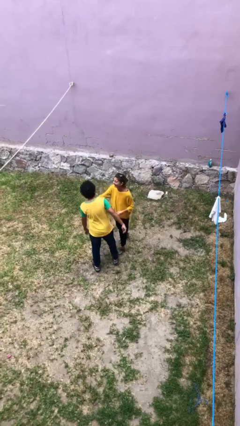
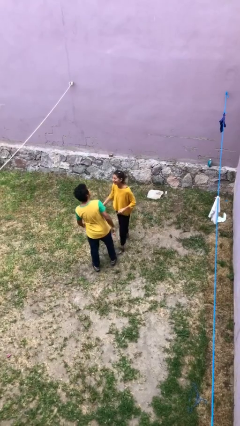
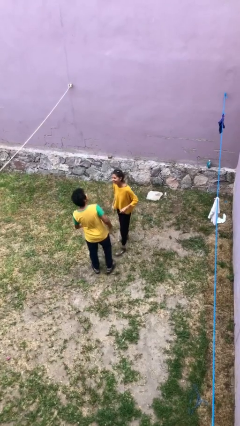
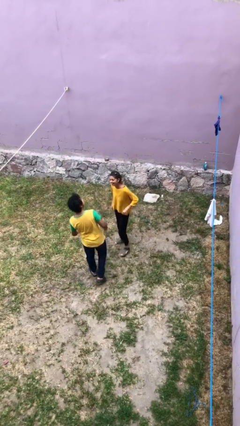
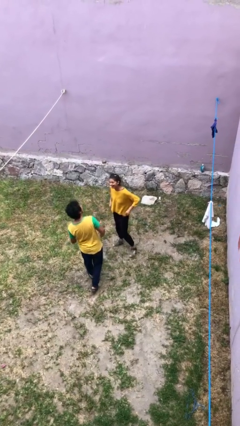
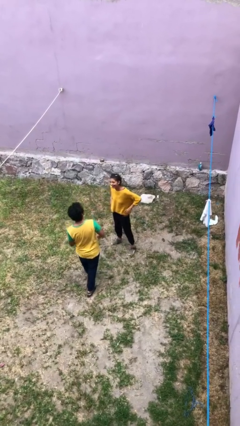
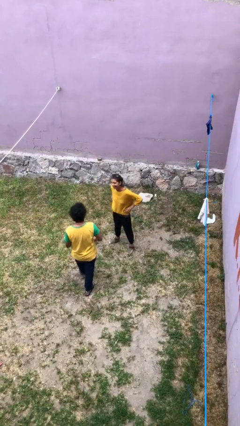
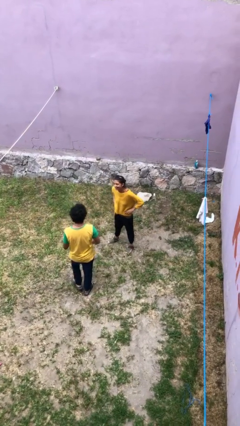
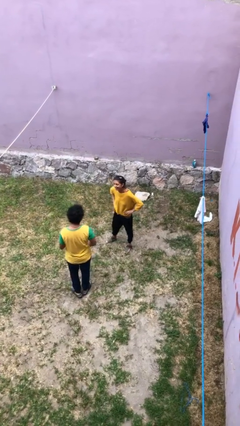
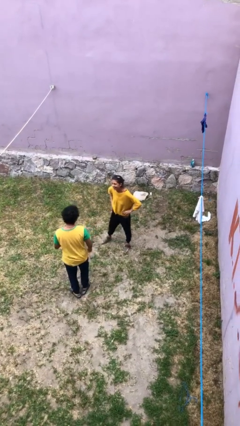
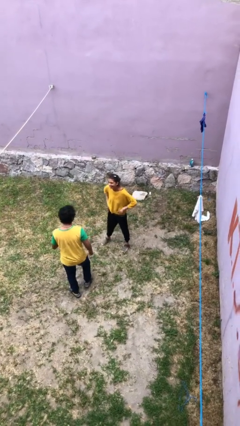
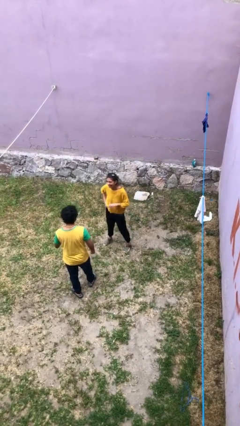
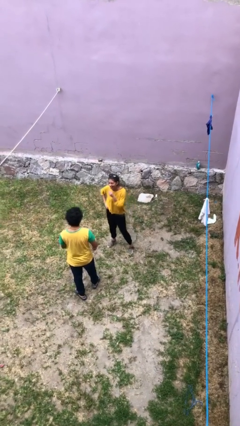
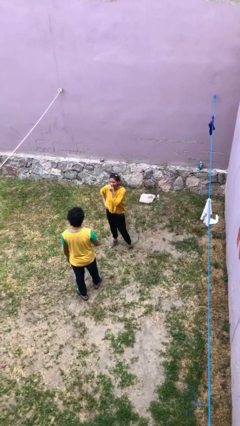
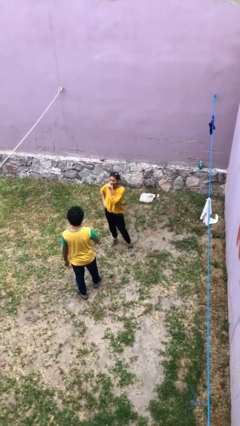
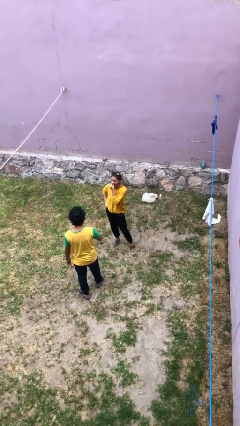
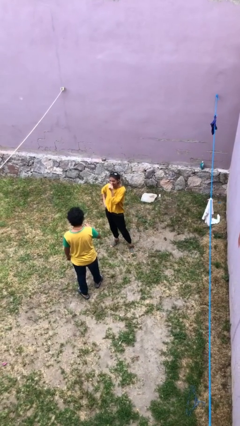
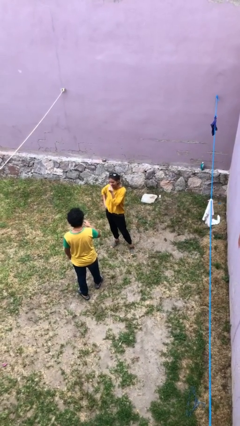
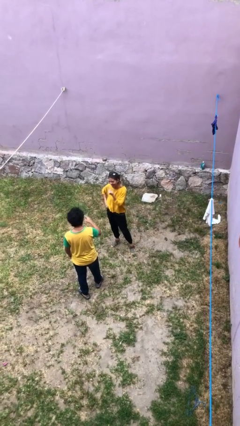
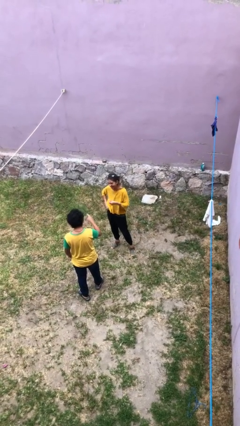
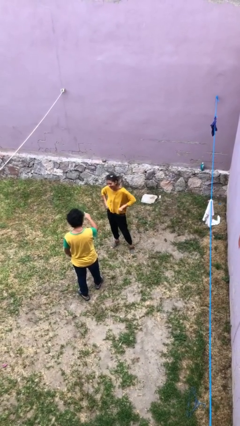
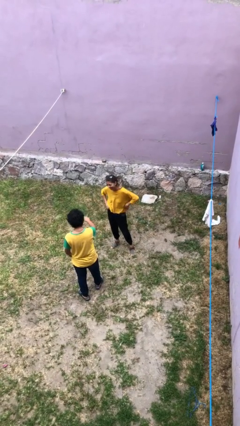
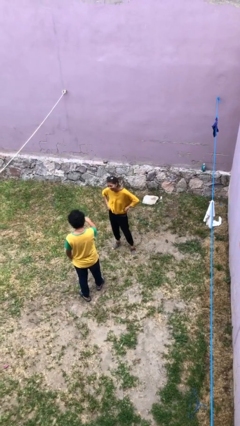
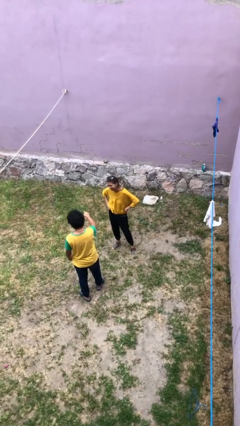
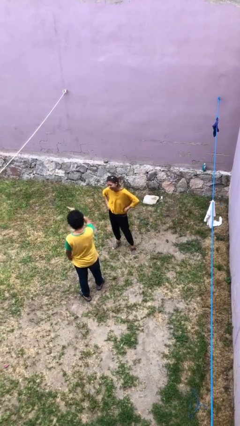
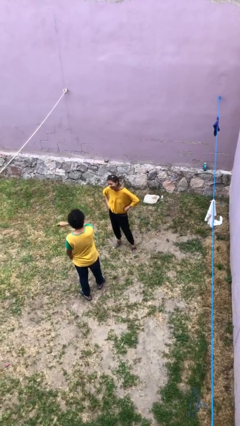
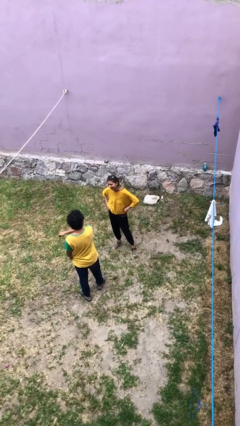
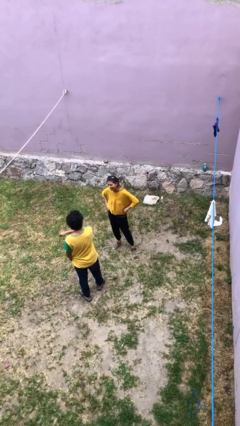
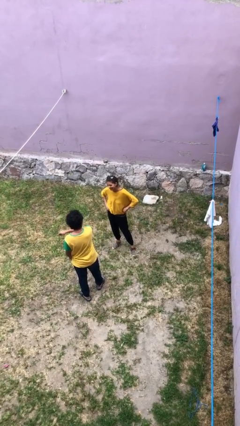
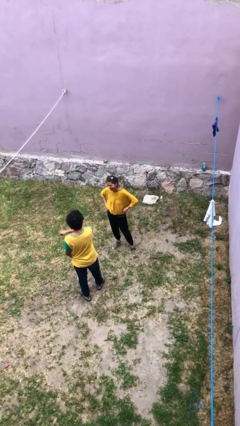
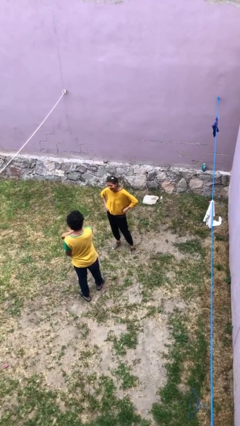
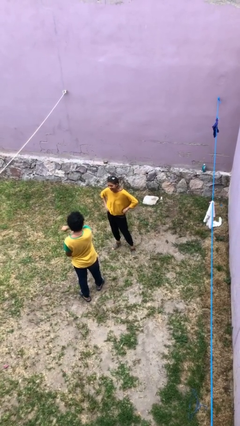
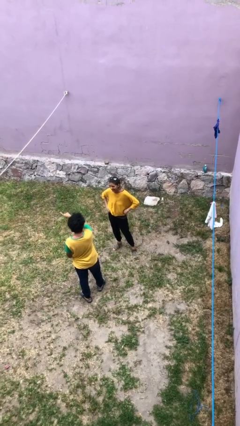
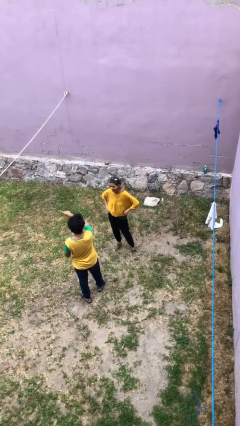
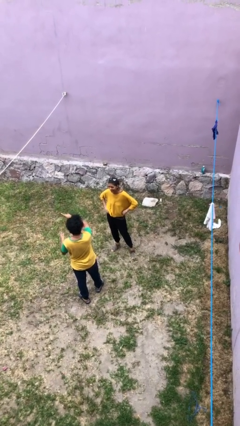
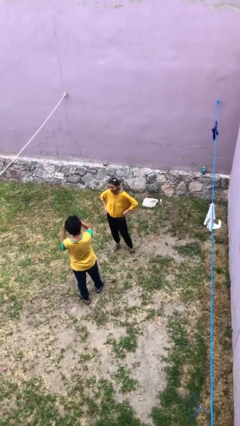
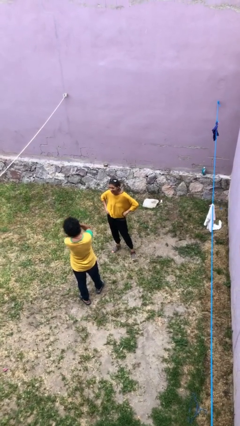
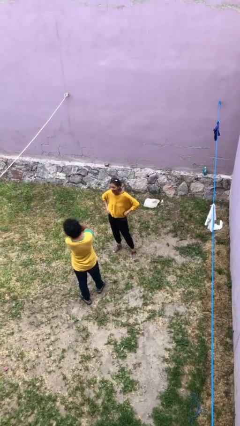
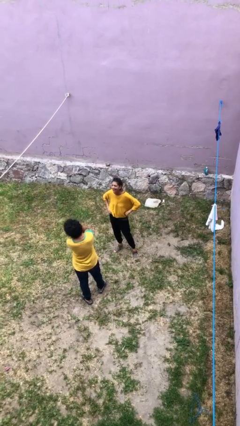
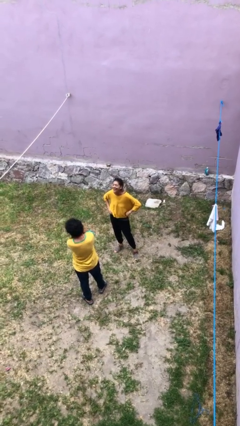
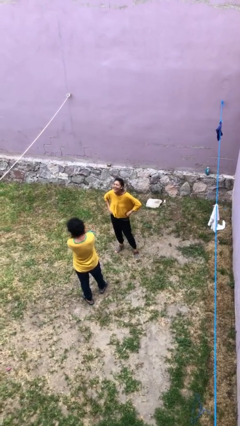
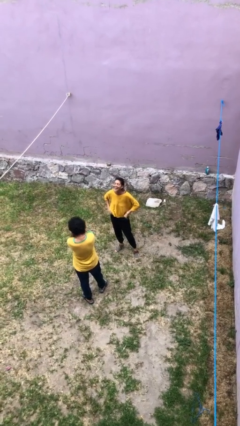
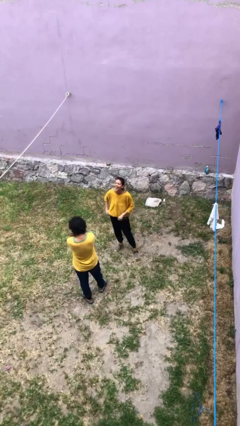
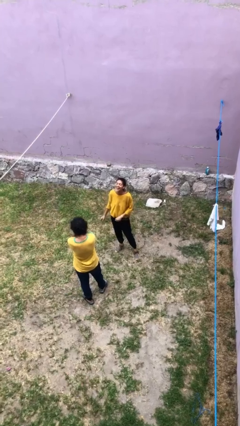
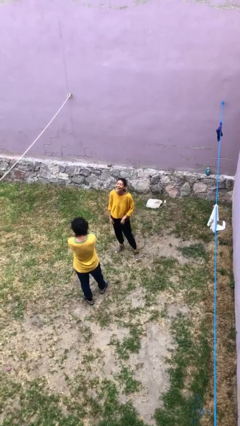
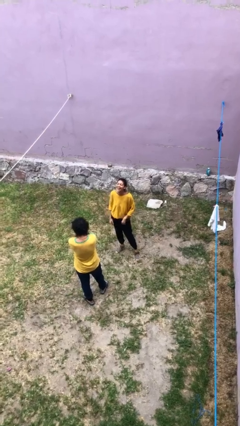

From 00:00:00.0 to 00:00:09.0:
person talks to person

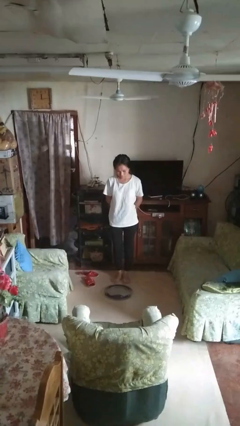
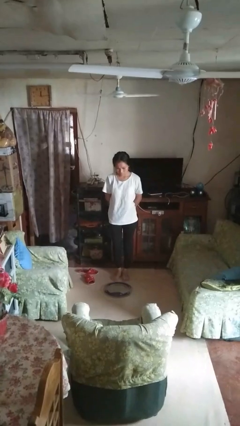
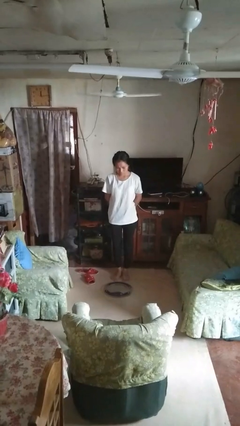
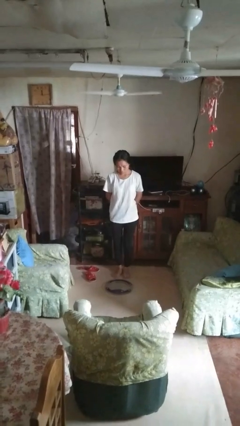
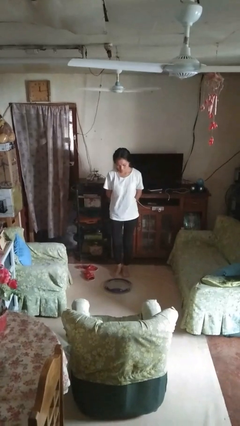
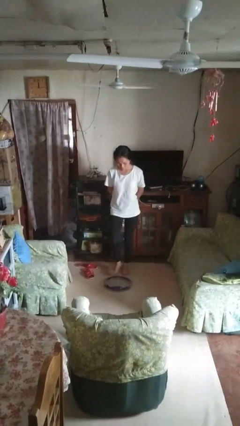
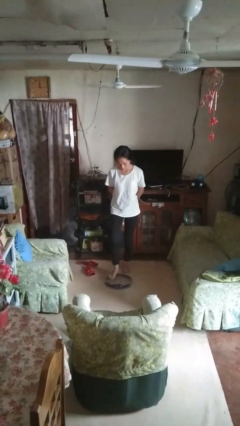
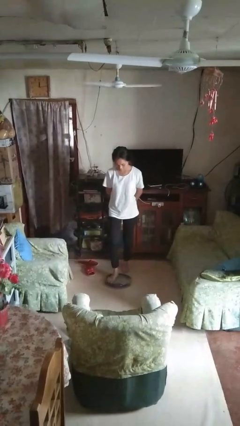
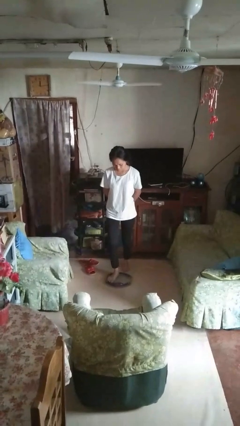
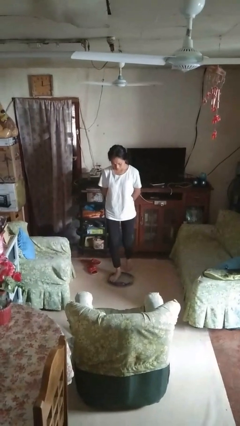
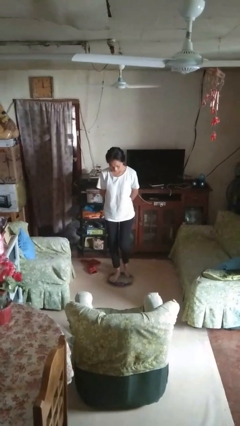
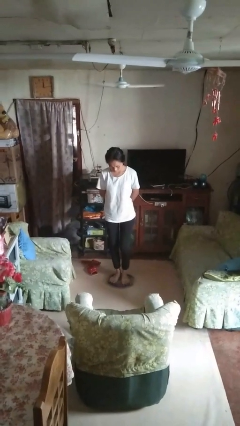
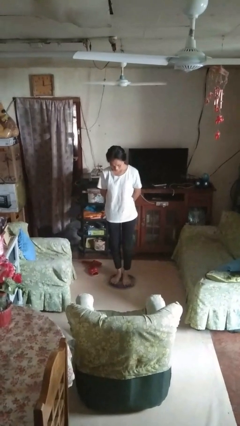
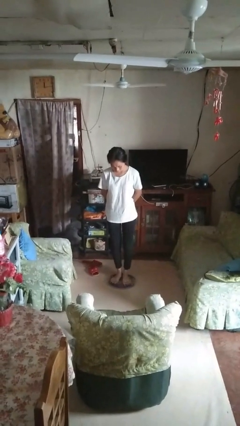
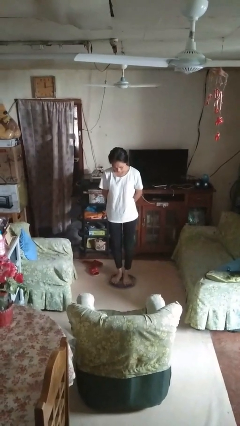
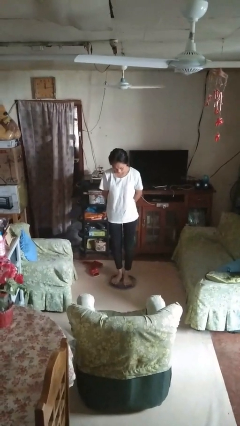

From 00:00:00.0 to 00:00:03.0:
person uses bodyweight scale

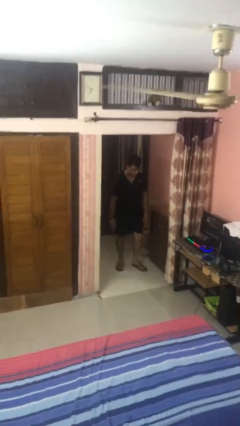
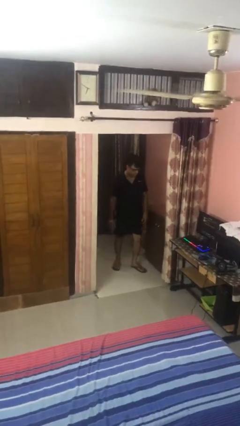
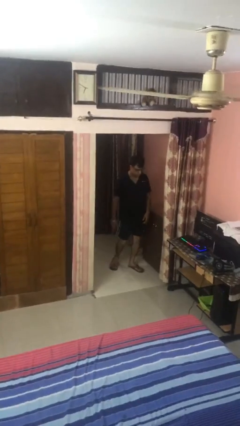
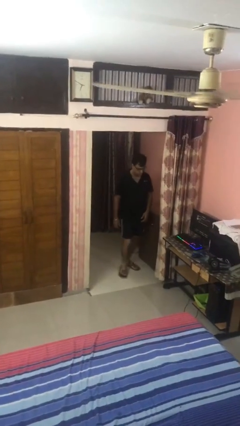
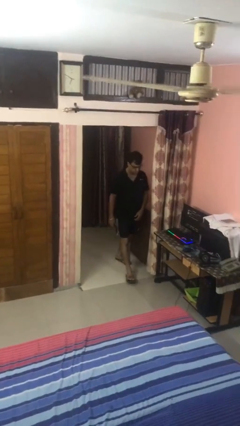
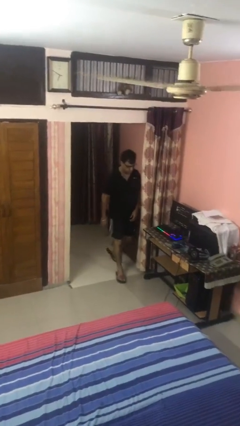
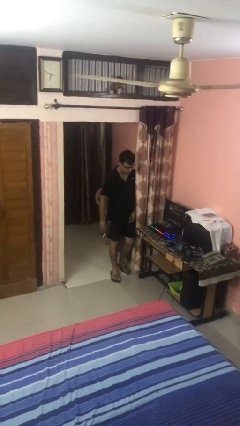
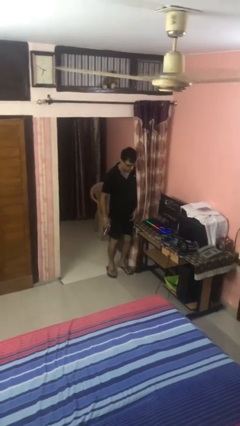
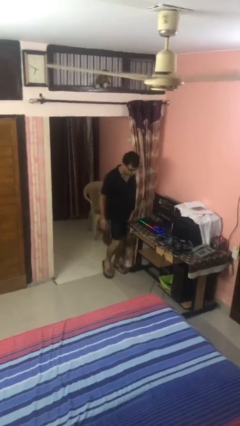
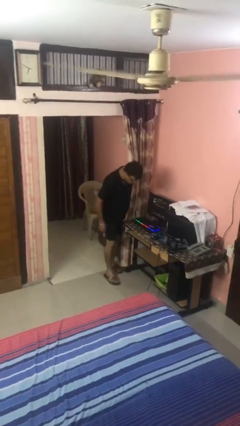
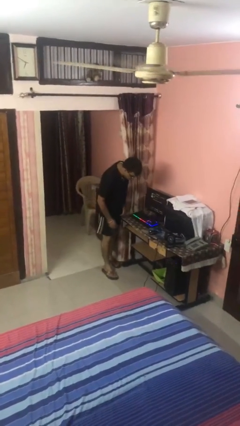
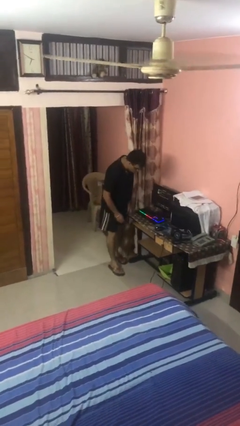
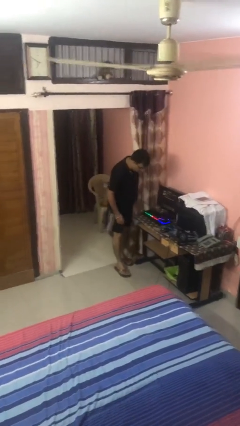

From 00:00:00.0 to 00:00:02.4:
person bumps into table

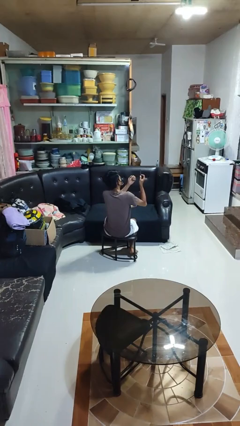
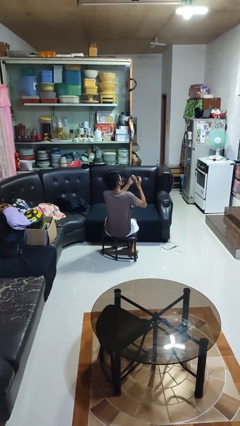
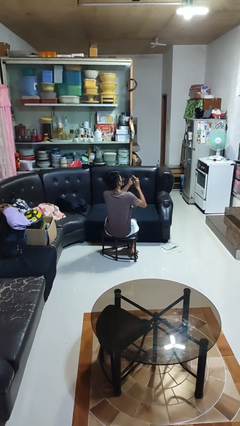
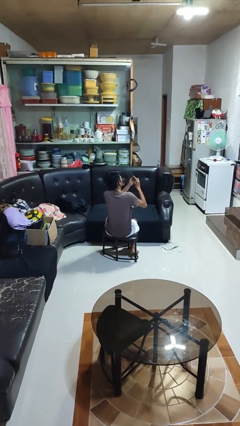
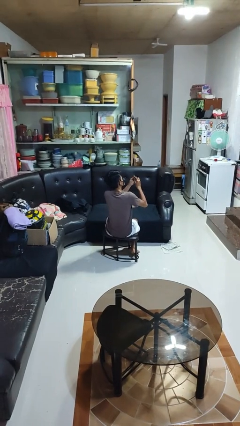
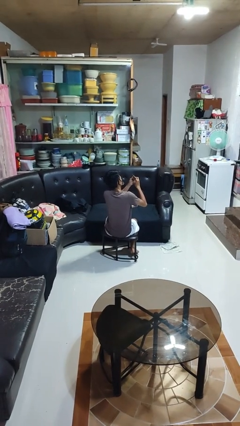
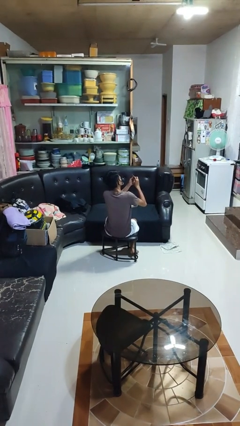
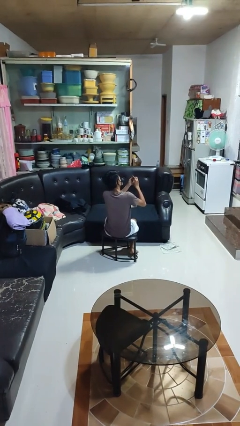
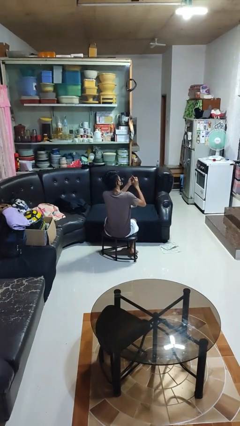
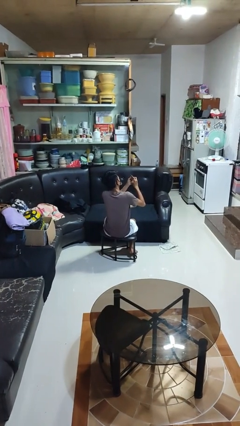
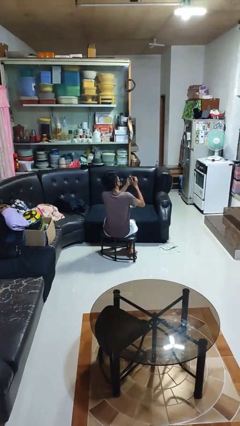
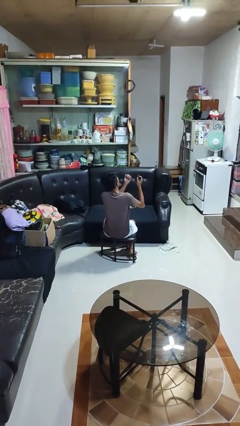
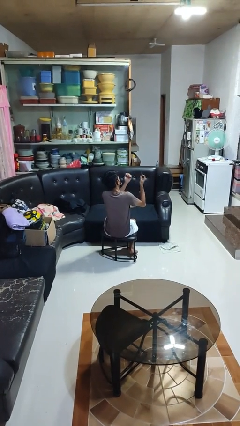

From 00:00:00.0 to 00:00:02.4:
person files fingernails

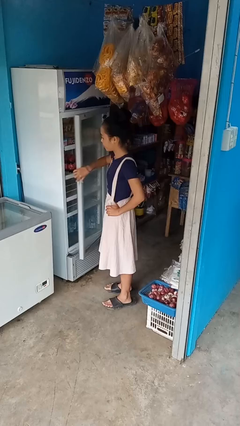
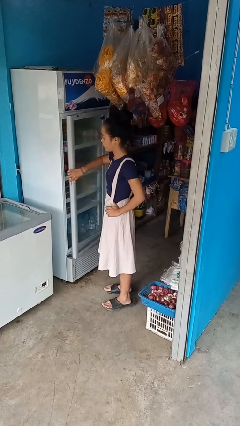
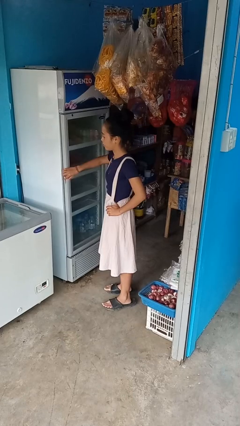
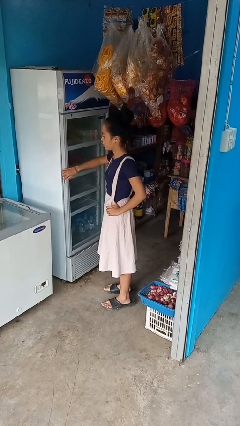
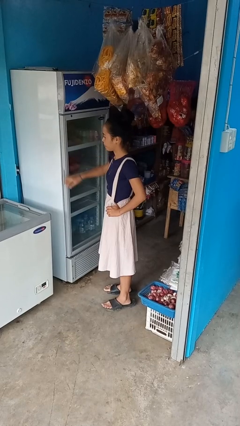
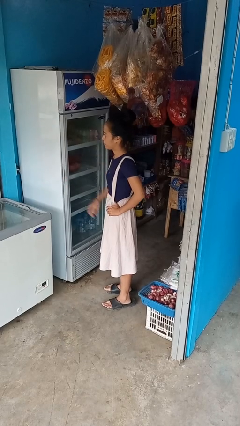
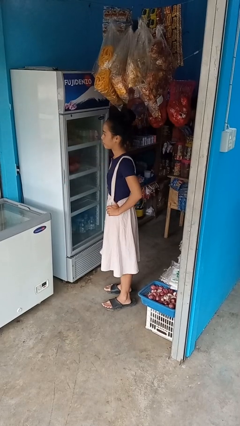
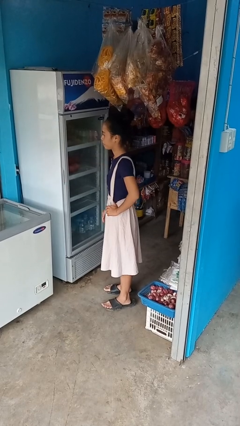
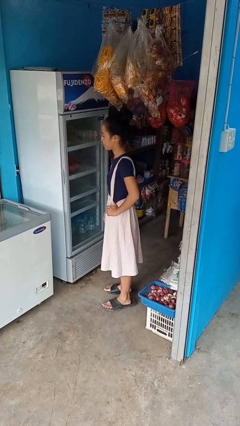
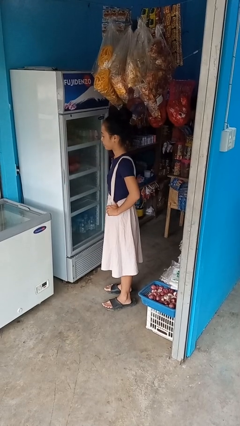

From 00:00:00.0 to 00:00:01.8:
person closes refrigerator
